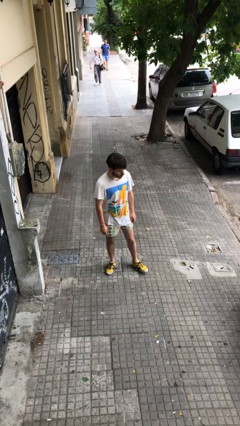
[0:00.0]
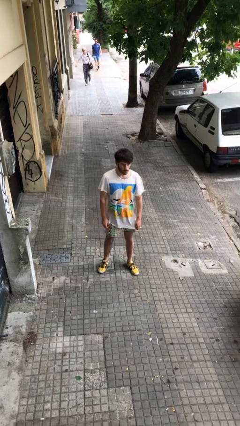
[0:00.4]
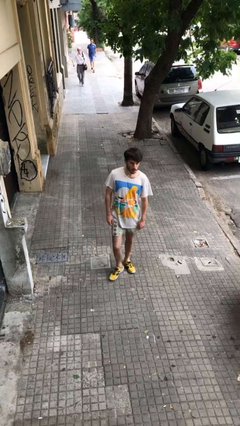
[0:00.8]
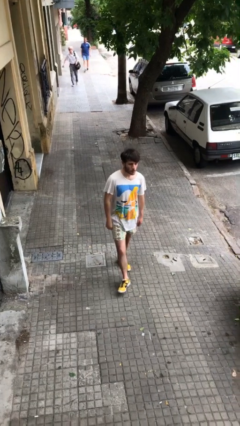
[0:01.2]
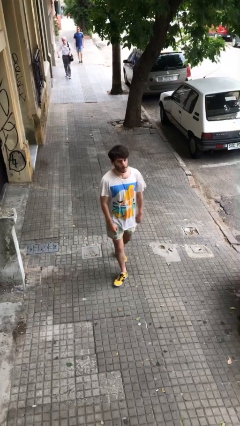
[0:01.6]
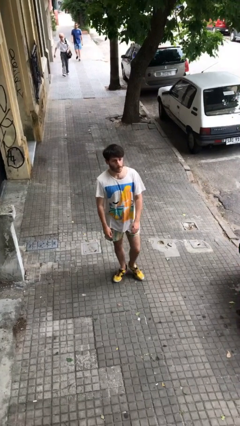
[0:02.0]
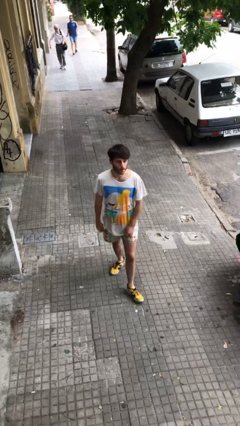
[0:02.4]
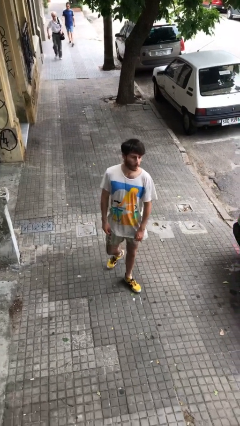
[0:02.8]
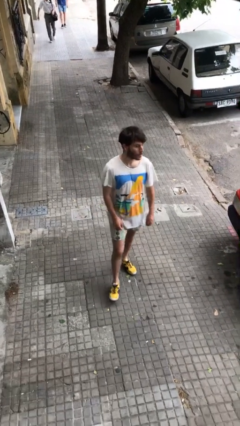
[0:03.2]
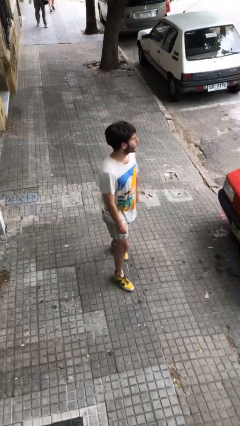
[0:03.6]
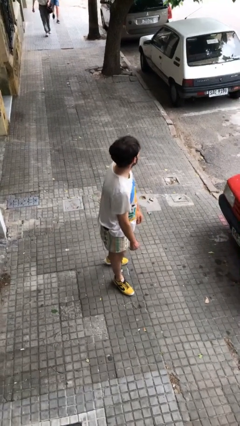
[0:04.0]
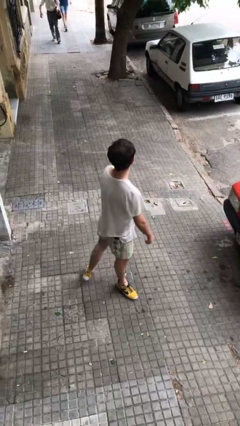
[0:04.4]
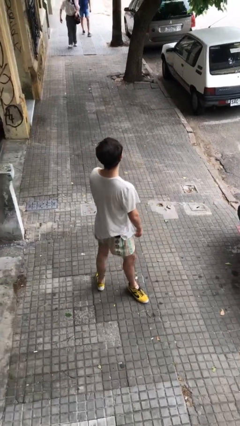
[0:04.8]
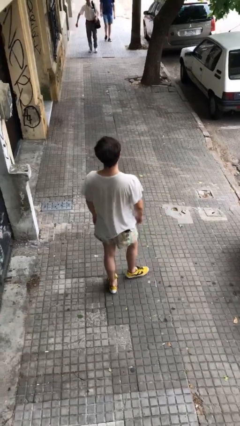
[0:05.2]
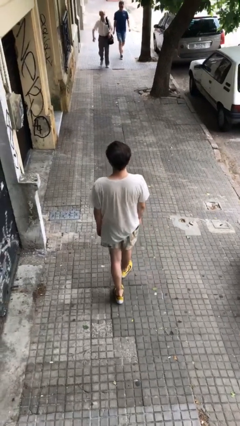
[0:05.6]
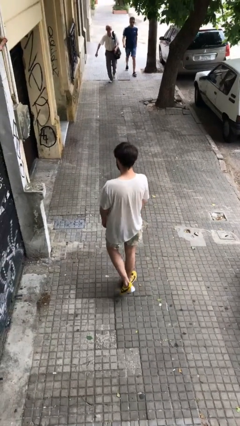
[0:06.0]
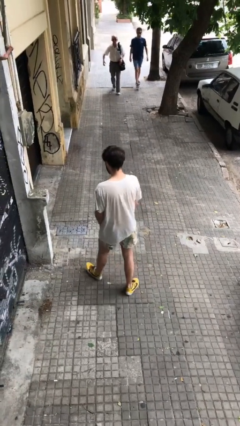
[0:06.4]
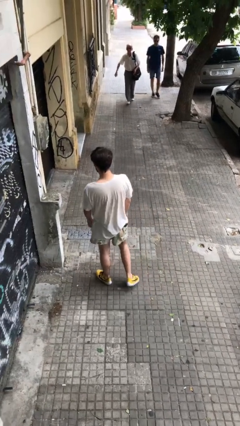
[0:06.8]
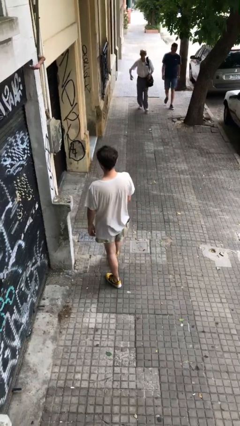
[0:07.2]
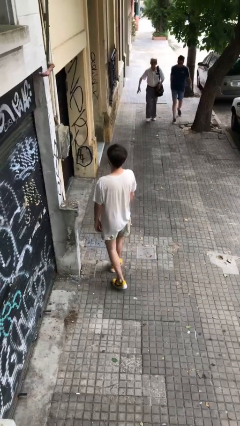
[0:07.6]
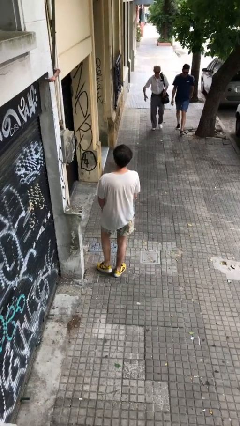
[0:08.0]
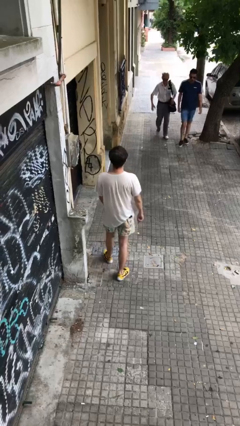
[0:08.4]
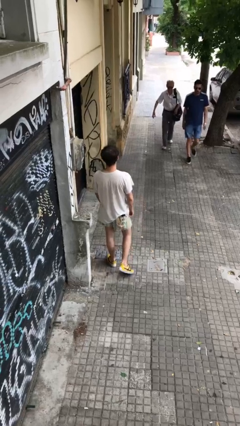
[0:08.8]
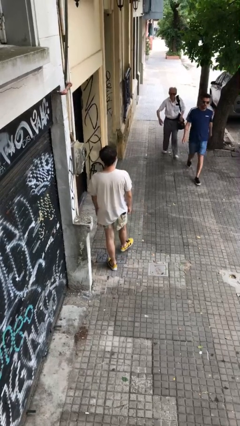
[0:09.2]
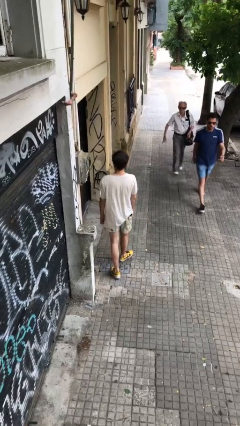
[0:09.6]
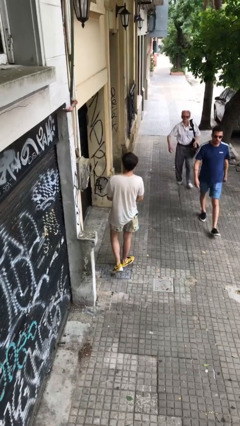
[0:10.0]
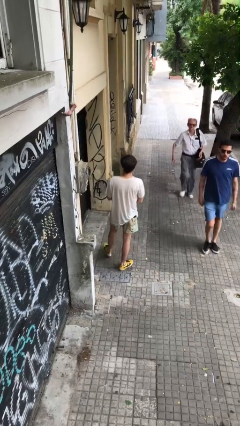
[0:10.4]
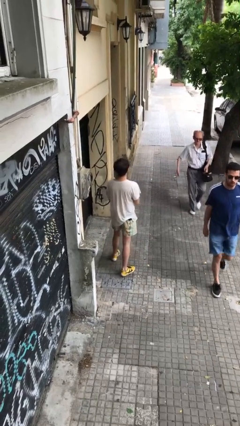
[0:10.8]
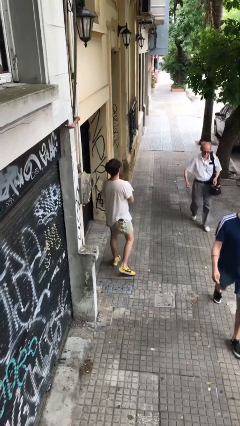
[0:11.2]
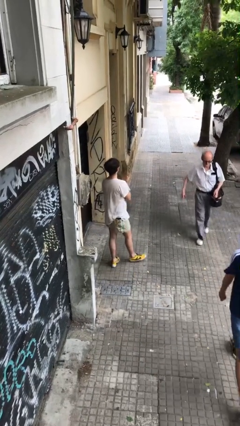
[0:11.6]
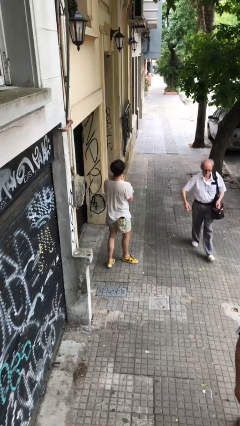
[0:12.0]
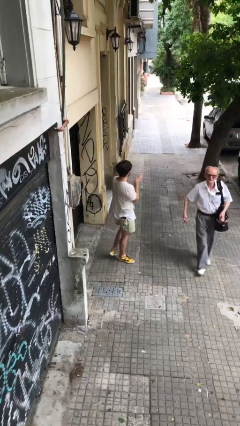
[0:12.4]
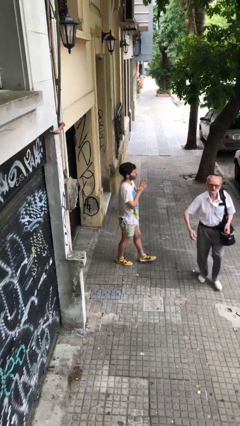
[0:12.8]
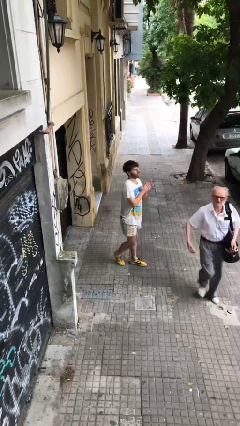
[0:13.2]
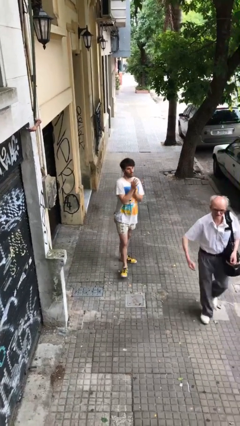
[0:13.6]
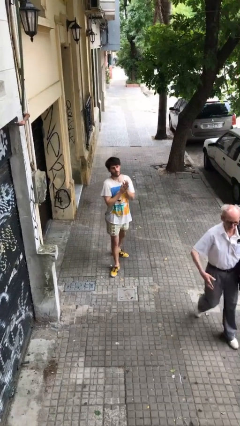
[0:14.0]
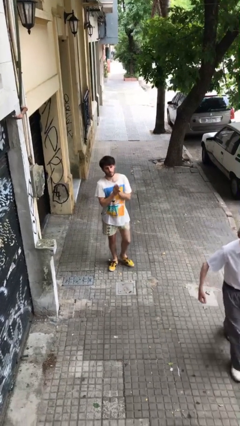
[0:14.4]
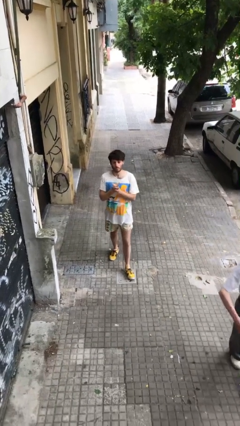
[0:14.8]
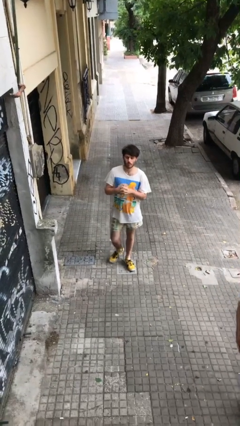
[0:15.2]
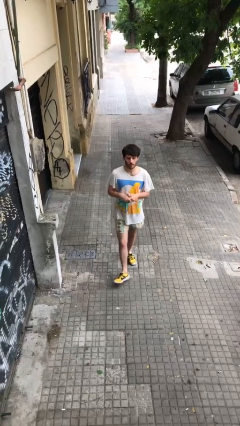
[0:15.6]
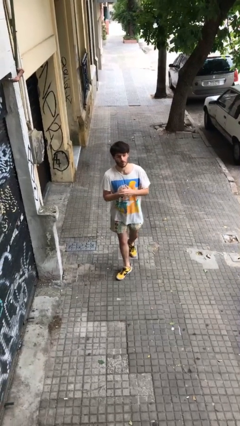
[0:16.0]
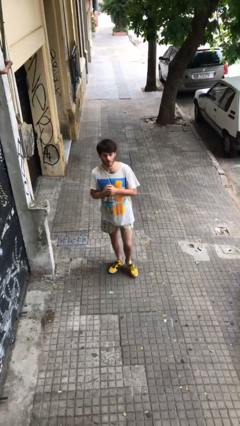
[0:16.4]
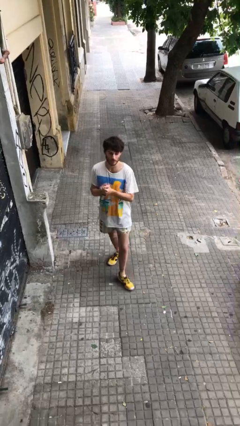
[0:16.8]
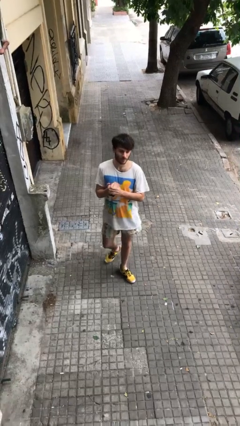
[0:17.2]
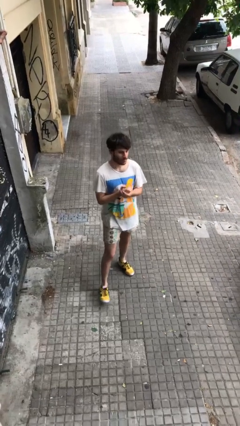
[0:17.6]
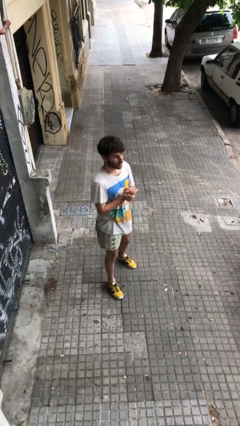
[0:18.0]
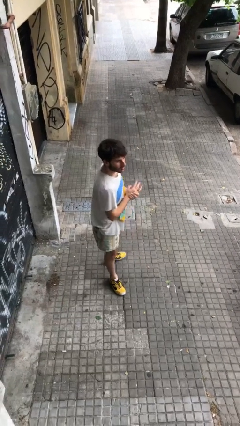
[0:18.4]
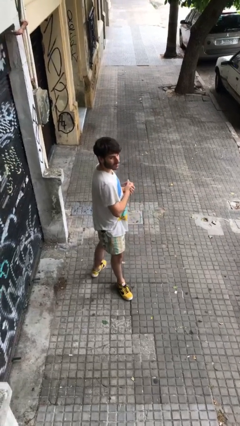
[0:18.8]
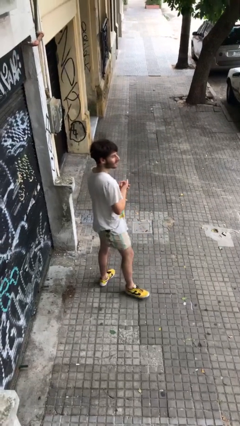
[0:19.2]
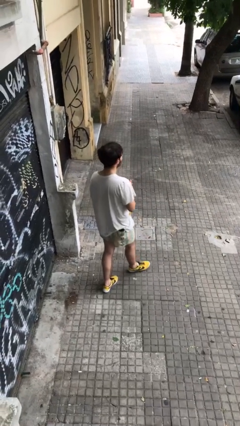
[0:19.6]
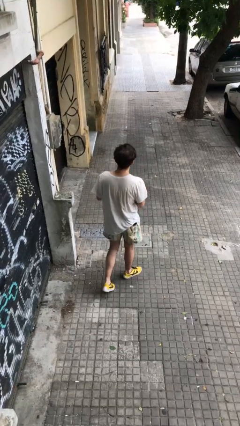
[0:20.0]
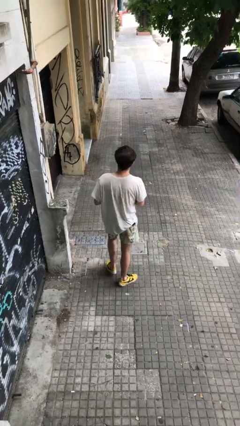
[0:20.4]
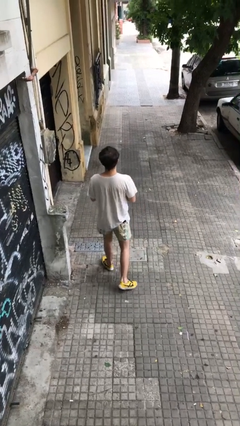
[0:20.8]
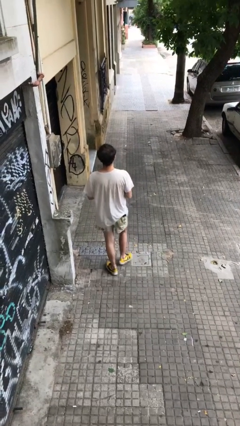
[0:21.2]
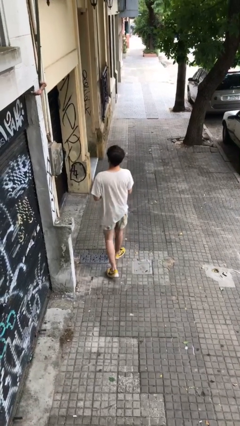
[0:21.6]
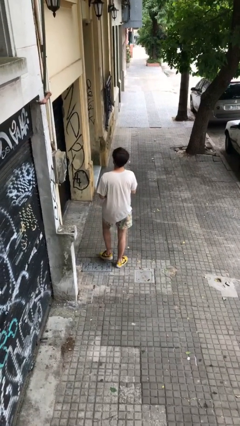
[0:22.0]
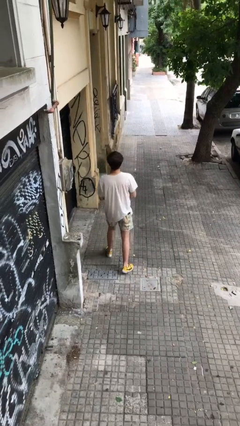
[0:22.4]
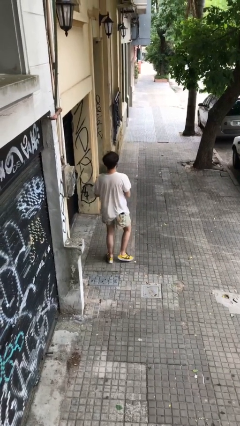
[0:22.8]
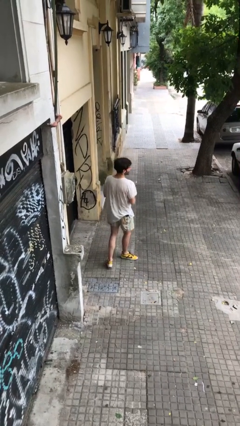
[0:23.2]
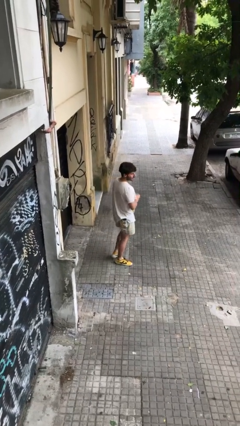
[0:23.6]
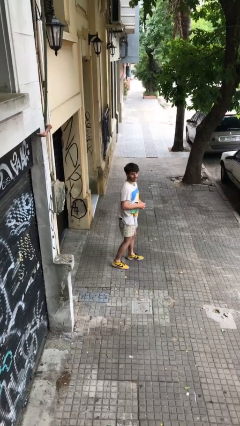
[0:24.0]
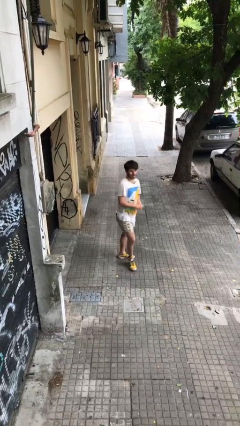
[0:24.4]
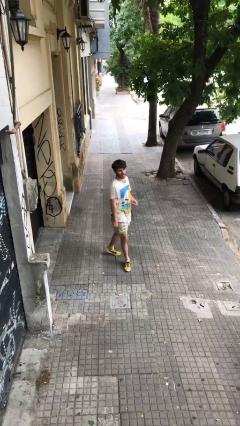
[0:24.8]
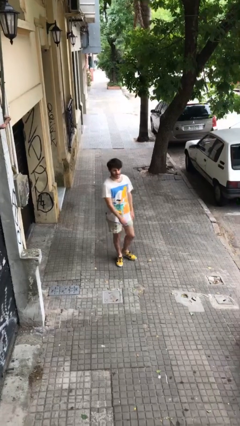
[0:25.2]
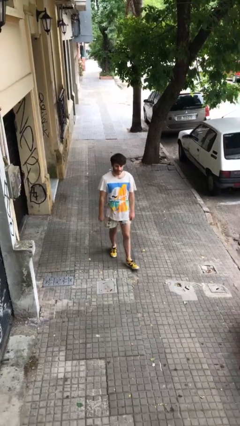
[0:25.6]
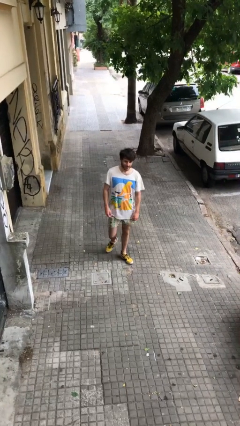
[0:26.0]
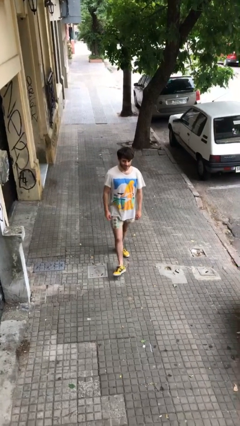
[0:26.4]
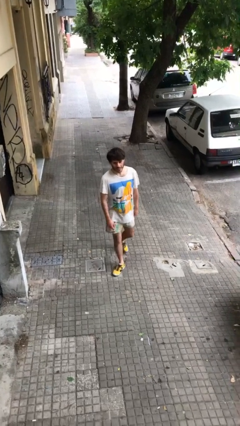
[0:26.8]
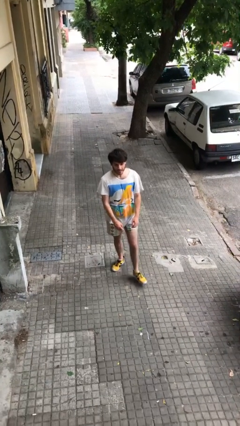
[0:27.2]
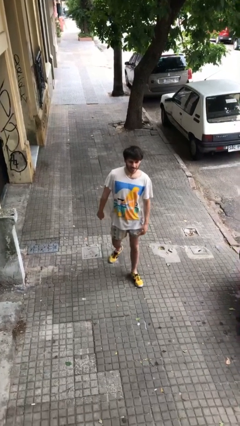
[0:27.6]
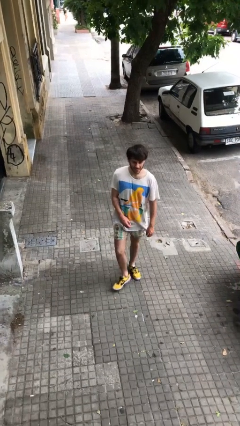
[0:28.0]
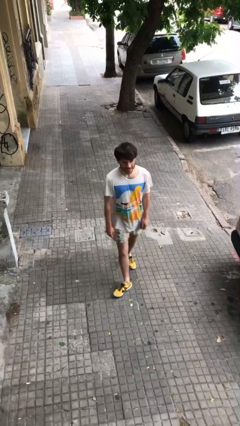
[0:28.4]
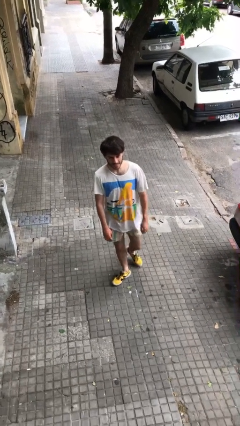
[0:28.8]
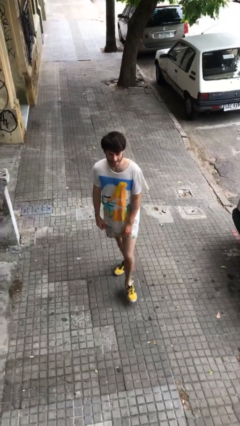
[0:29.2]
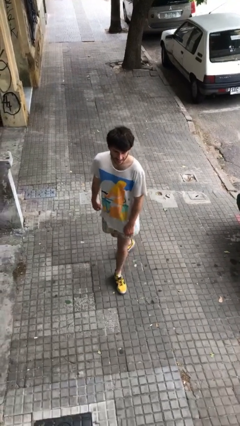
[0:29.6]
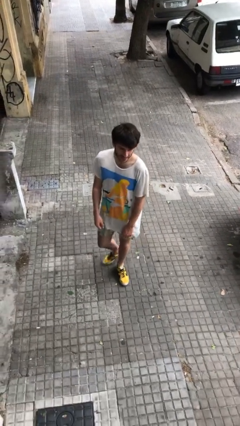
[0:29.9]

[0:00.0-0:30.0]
person walks

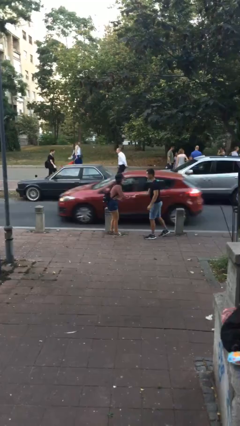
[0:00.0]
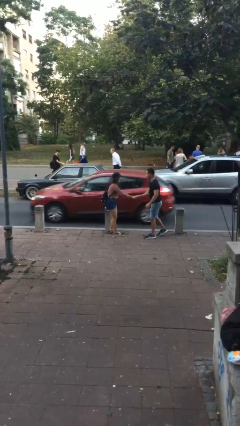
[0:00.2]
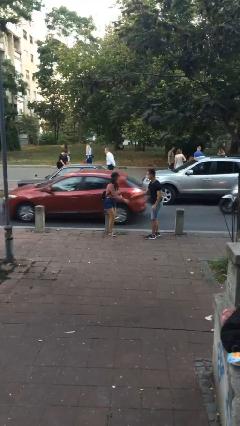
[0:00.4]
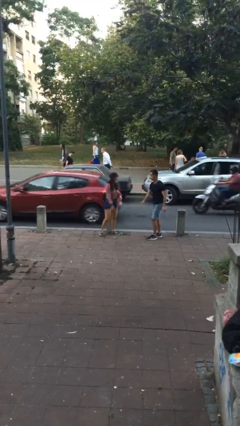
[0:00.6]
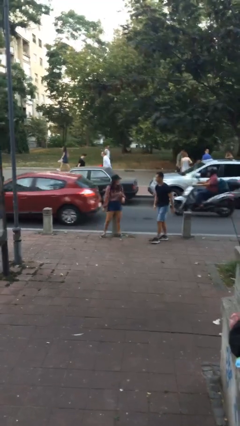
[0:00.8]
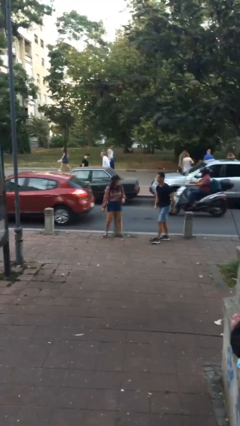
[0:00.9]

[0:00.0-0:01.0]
person shakes hand

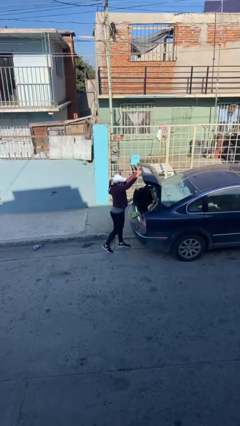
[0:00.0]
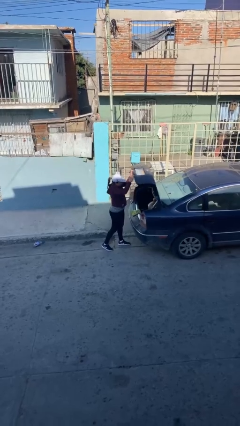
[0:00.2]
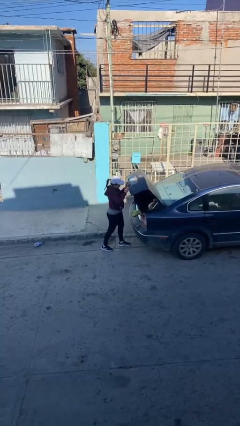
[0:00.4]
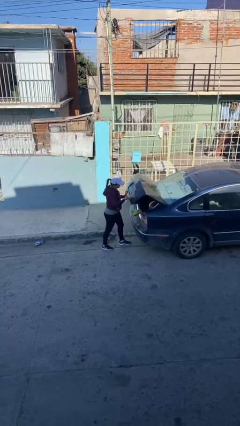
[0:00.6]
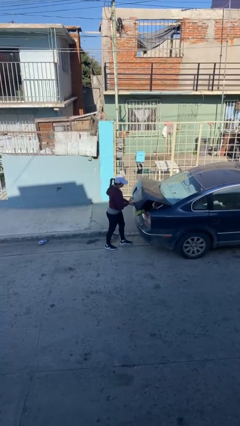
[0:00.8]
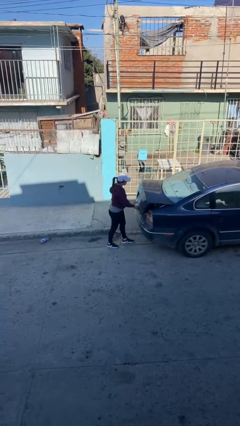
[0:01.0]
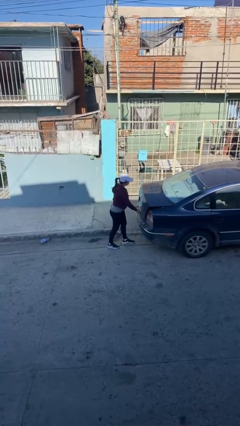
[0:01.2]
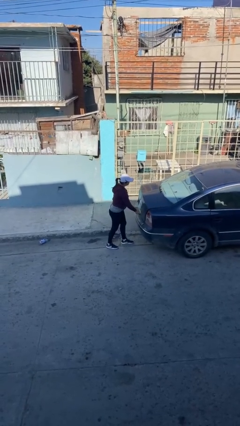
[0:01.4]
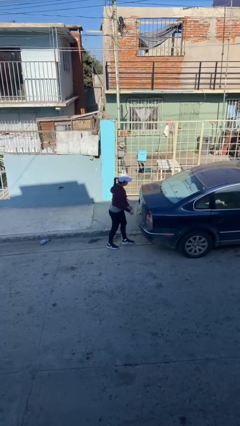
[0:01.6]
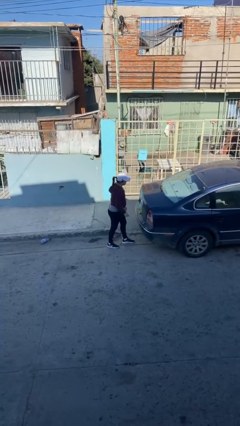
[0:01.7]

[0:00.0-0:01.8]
person closes car trunk

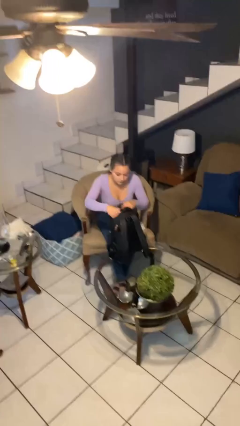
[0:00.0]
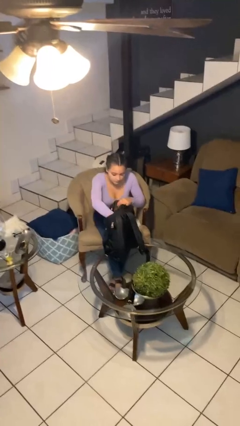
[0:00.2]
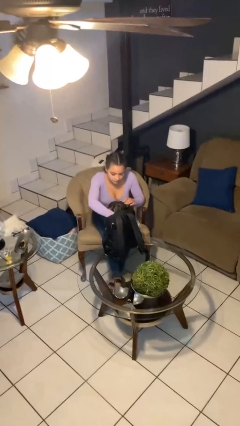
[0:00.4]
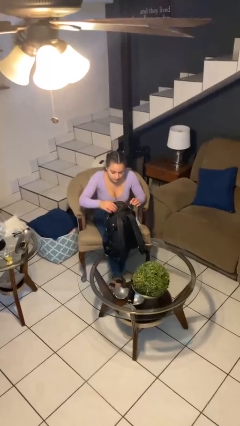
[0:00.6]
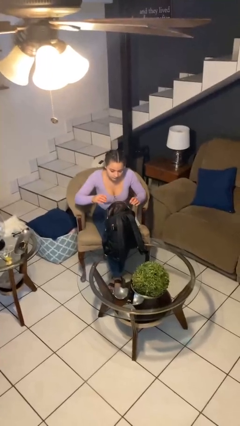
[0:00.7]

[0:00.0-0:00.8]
person puts object into backpack
